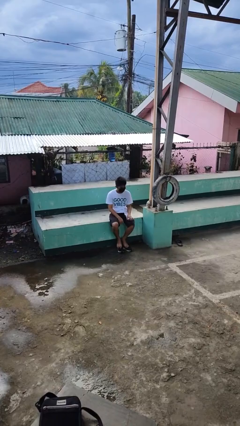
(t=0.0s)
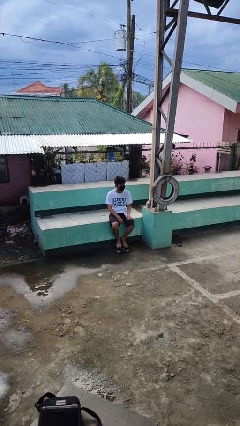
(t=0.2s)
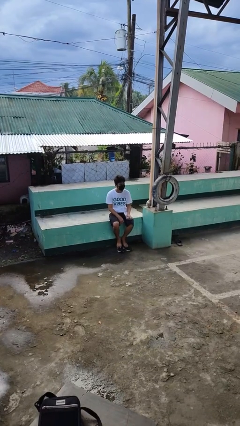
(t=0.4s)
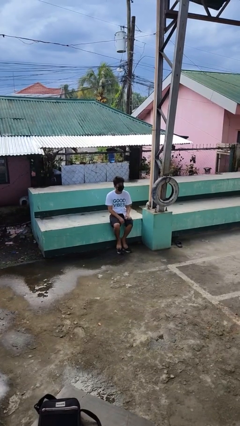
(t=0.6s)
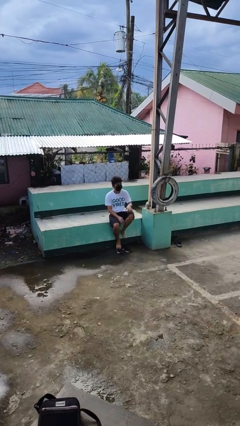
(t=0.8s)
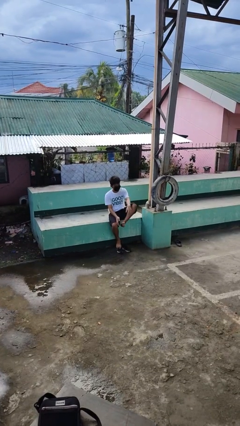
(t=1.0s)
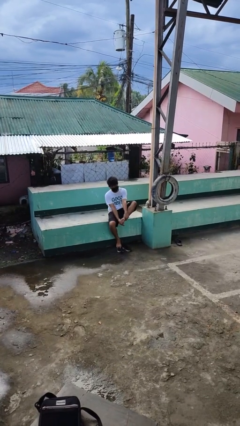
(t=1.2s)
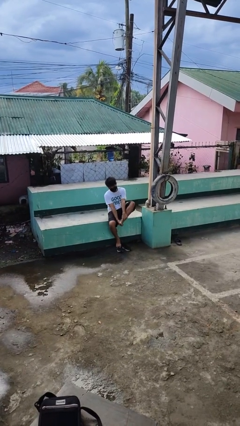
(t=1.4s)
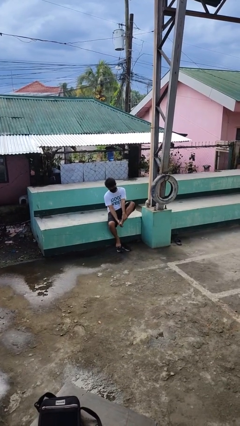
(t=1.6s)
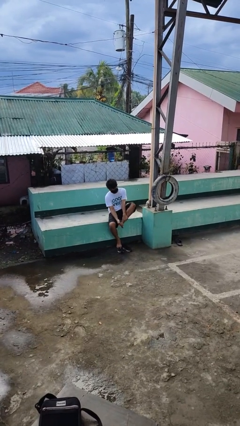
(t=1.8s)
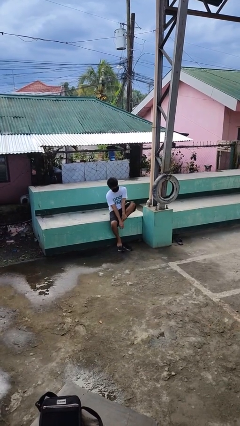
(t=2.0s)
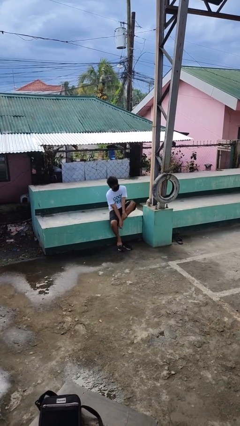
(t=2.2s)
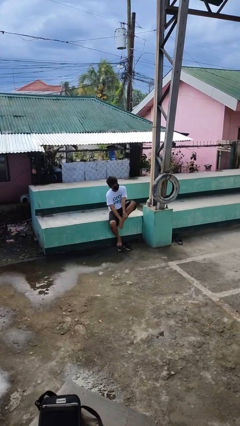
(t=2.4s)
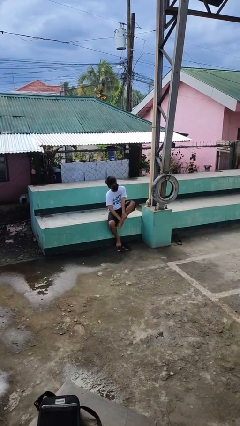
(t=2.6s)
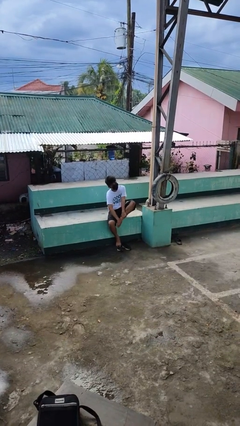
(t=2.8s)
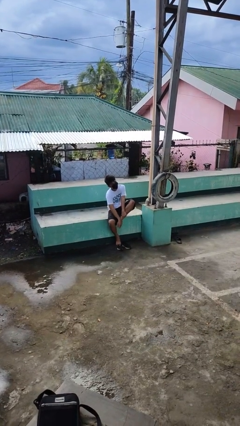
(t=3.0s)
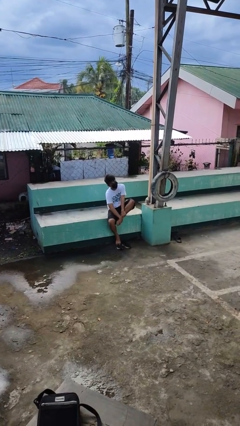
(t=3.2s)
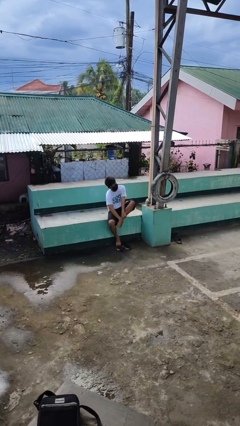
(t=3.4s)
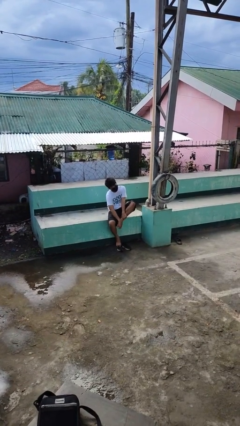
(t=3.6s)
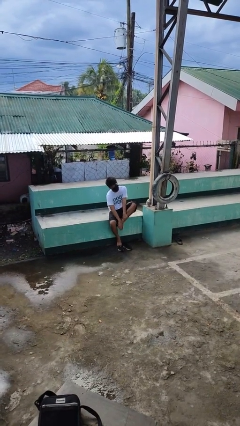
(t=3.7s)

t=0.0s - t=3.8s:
person rubs foot

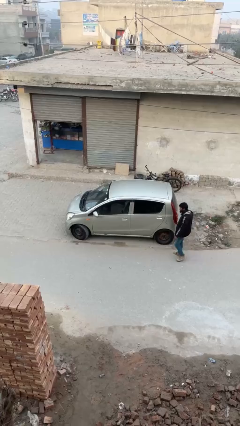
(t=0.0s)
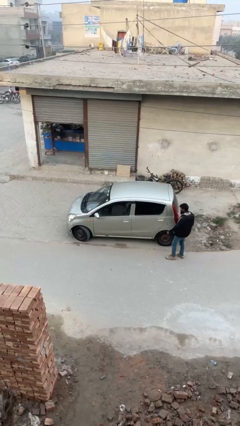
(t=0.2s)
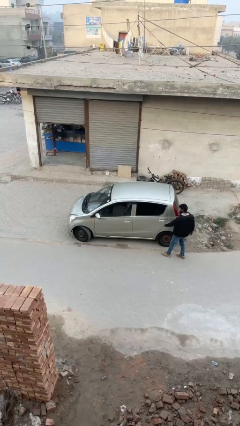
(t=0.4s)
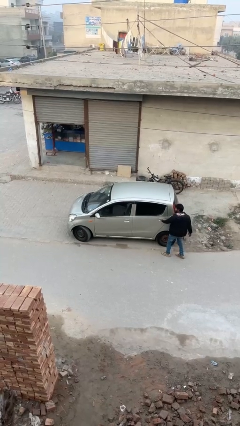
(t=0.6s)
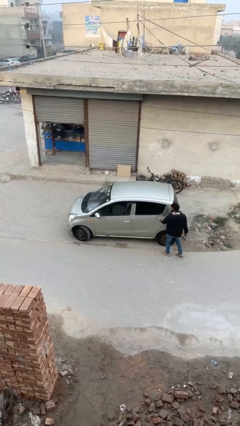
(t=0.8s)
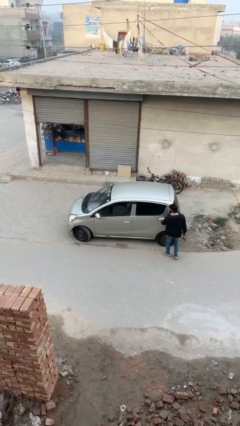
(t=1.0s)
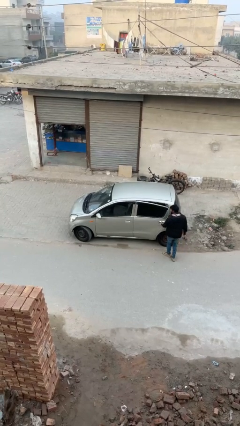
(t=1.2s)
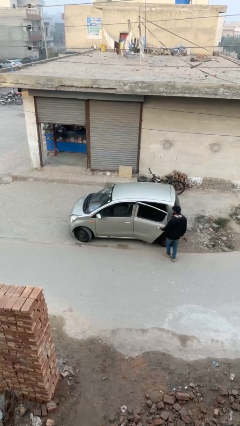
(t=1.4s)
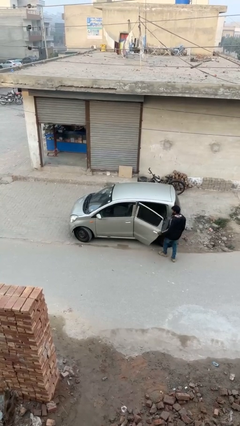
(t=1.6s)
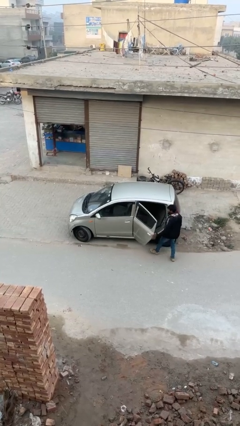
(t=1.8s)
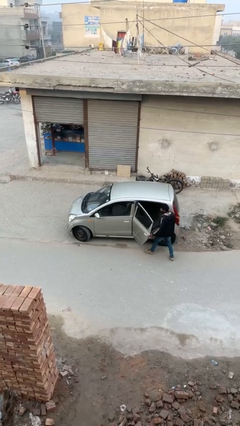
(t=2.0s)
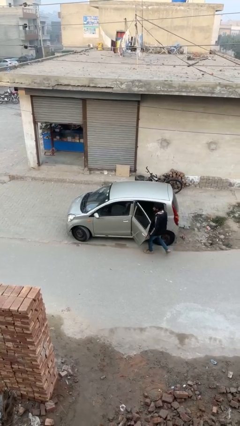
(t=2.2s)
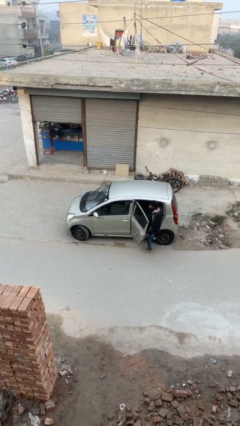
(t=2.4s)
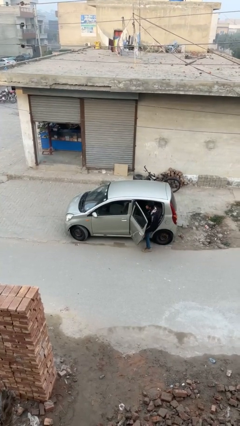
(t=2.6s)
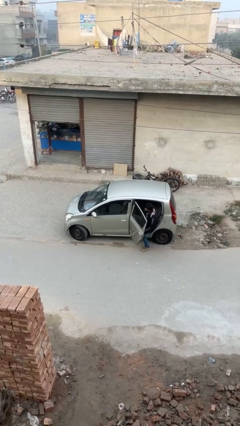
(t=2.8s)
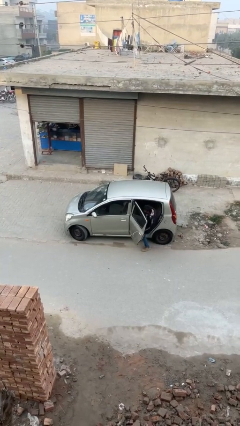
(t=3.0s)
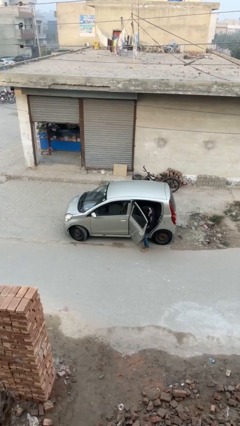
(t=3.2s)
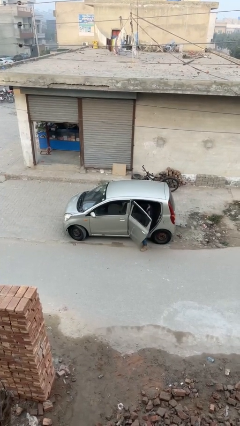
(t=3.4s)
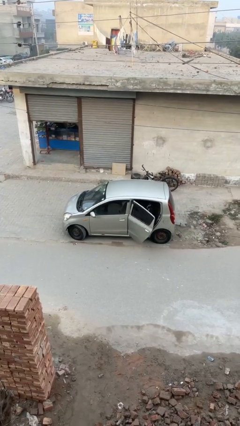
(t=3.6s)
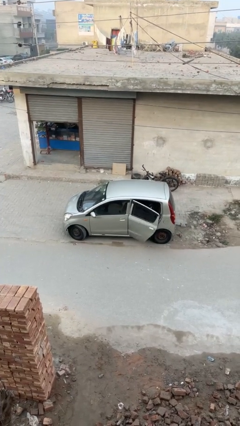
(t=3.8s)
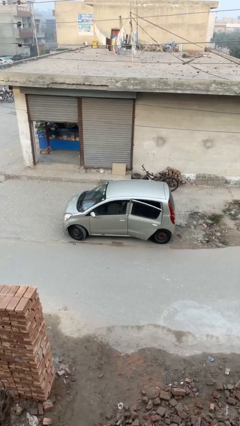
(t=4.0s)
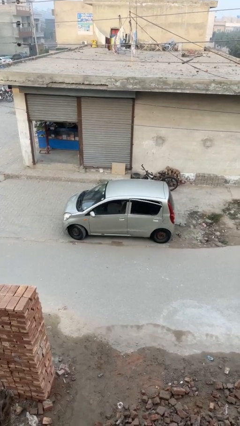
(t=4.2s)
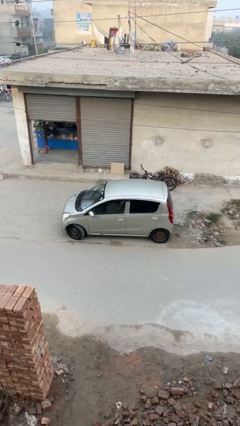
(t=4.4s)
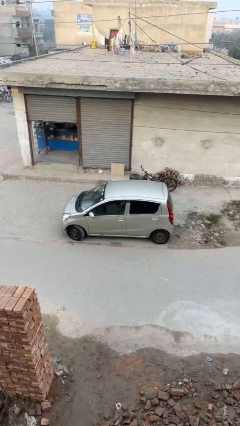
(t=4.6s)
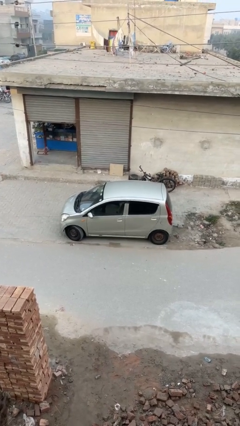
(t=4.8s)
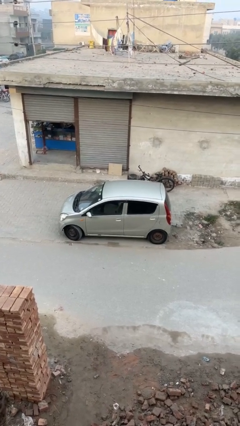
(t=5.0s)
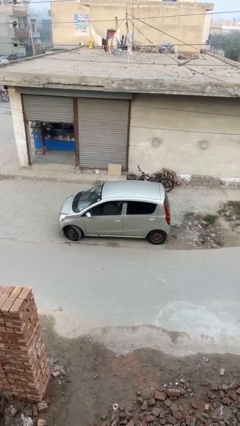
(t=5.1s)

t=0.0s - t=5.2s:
car picks up person

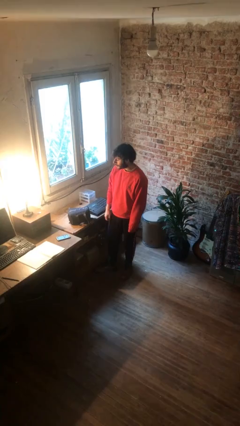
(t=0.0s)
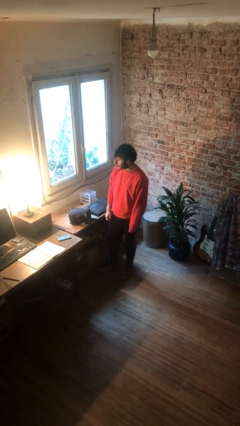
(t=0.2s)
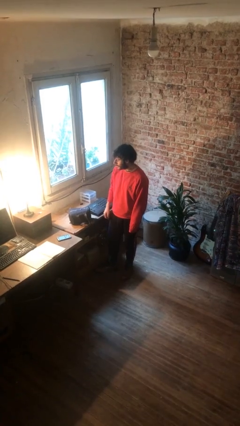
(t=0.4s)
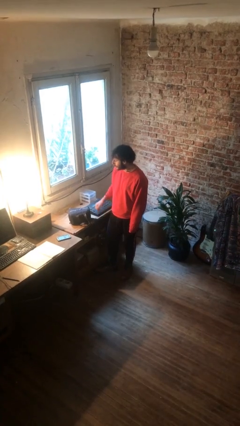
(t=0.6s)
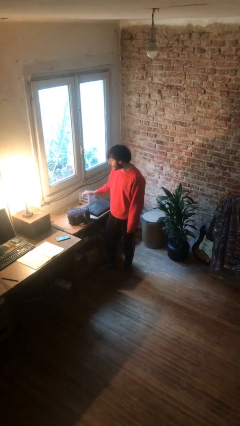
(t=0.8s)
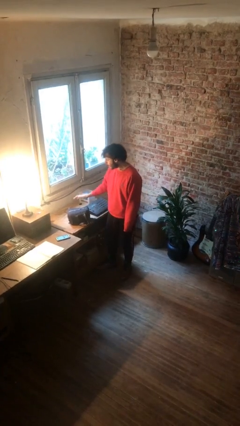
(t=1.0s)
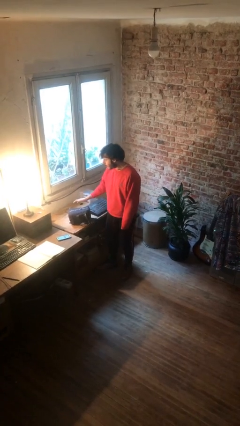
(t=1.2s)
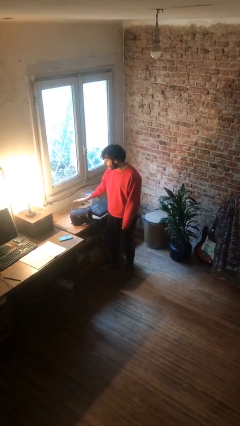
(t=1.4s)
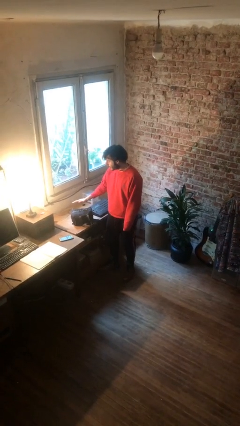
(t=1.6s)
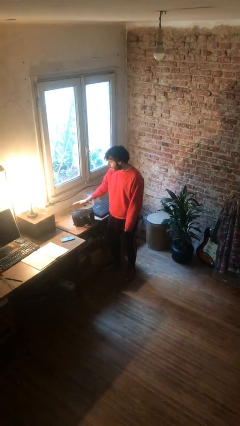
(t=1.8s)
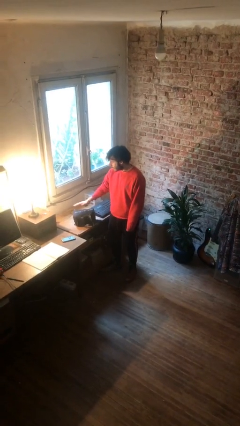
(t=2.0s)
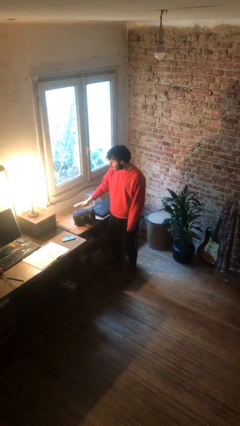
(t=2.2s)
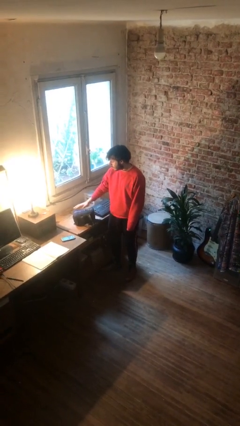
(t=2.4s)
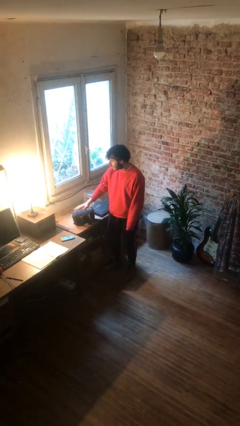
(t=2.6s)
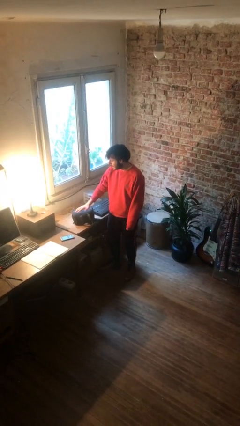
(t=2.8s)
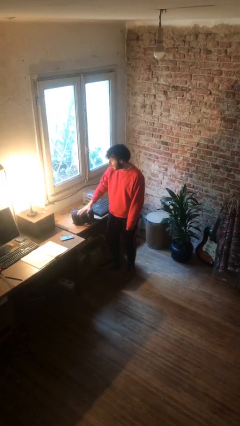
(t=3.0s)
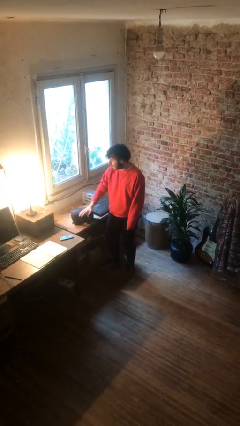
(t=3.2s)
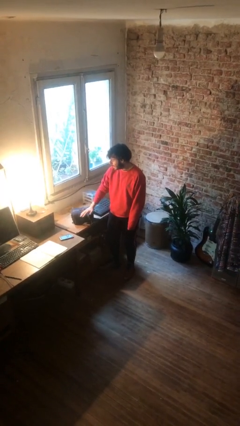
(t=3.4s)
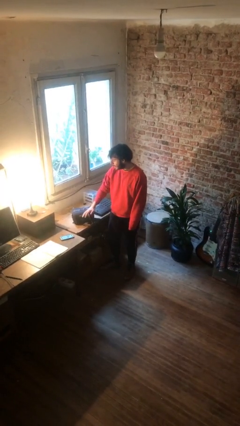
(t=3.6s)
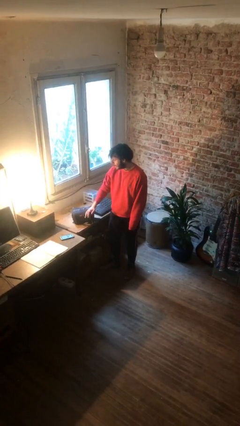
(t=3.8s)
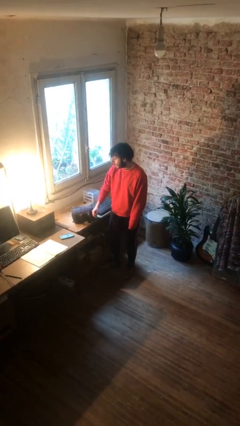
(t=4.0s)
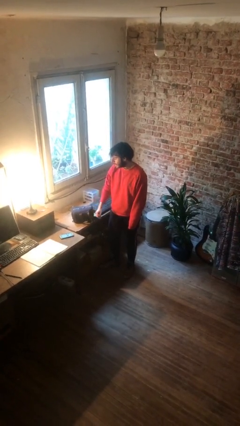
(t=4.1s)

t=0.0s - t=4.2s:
person waves hand over object

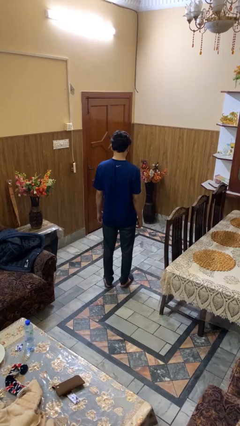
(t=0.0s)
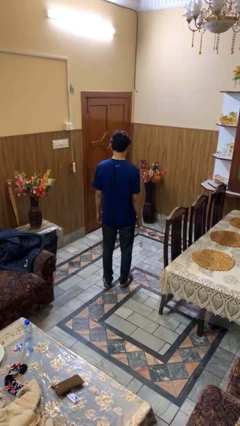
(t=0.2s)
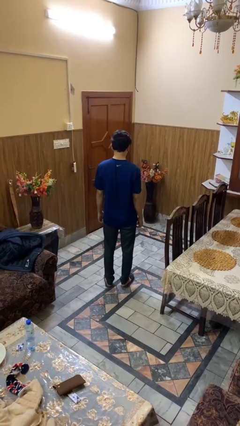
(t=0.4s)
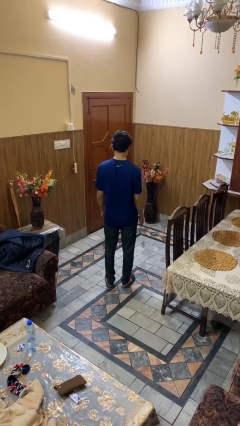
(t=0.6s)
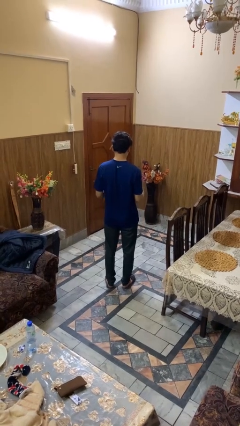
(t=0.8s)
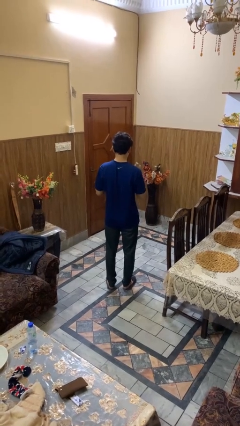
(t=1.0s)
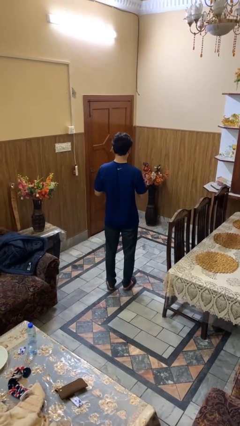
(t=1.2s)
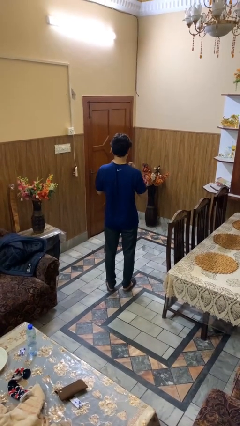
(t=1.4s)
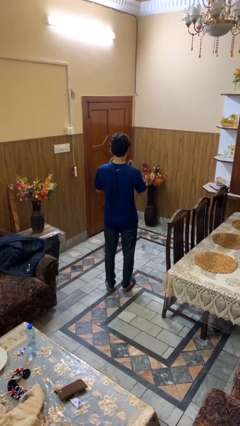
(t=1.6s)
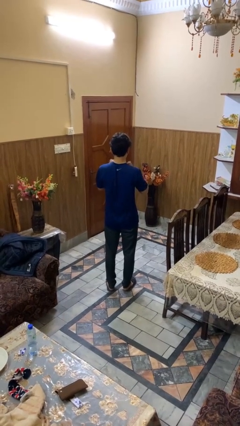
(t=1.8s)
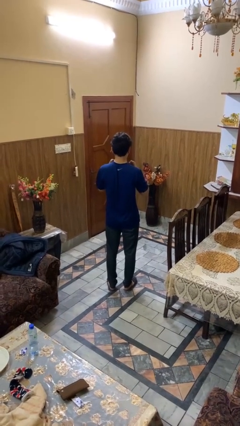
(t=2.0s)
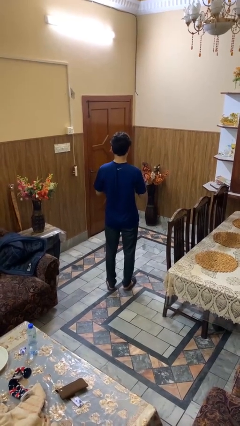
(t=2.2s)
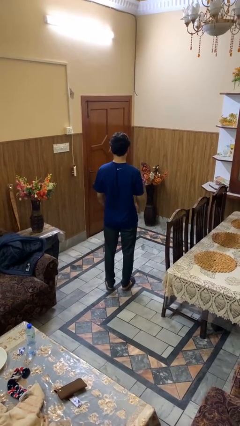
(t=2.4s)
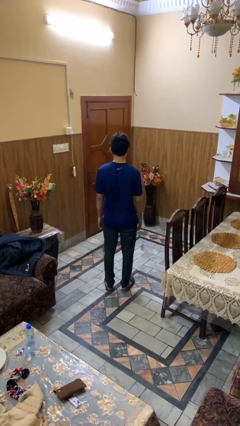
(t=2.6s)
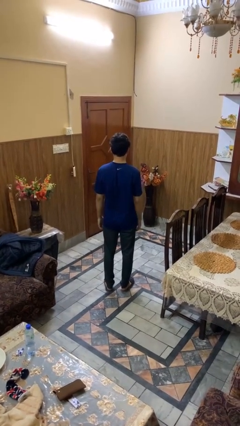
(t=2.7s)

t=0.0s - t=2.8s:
person drums on chest

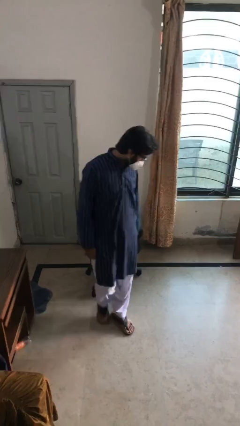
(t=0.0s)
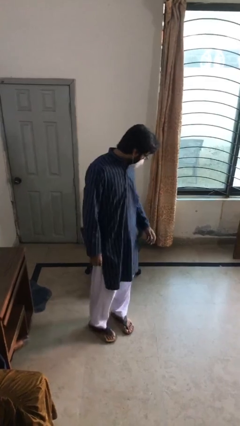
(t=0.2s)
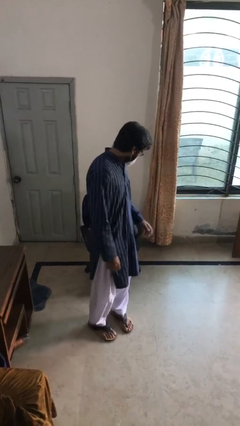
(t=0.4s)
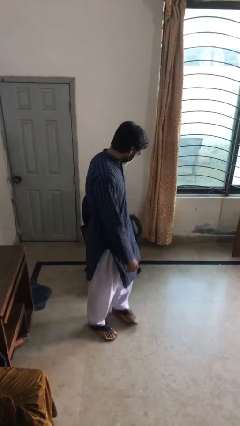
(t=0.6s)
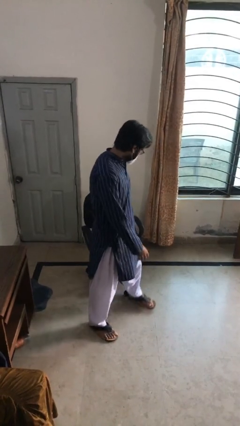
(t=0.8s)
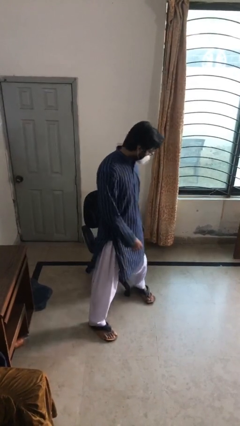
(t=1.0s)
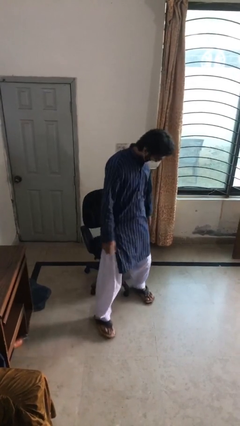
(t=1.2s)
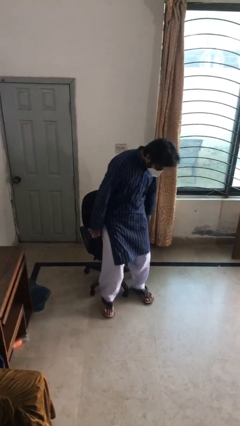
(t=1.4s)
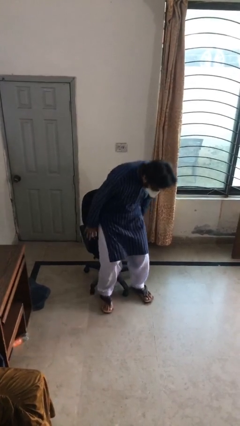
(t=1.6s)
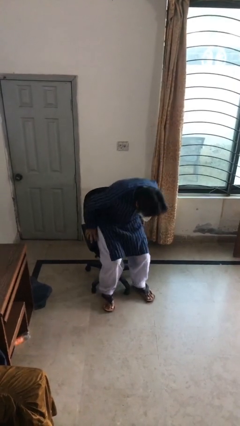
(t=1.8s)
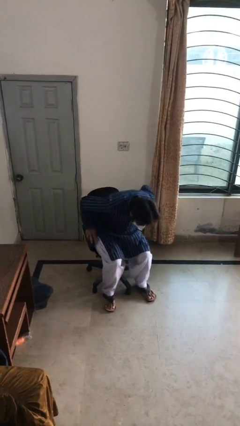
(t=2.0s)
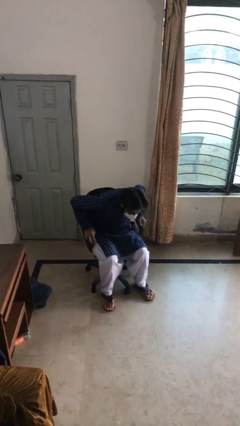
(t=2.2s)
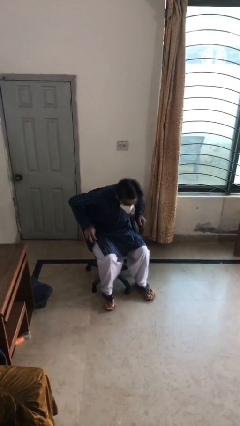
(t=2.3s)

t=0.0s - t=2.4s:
person sits down
